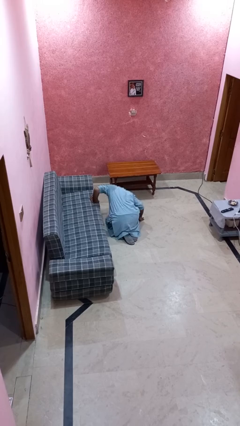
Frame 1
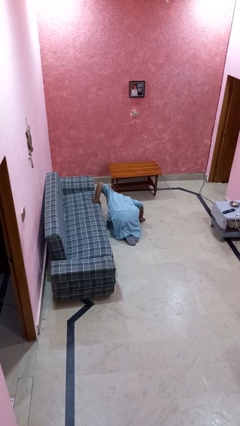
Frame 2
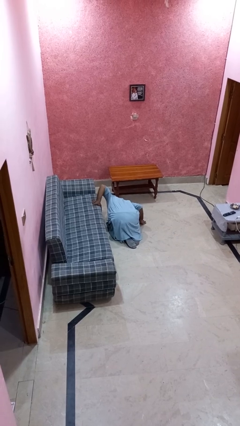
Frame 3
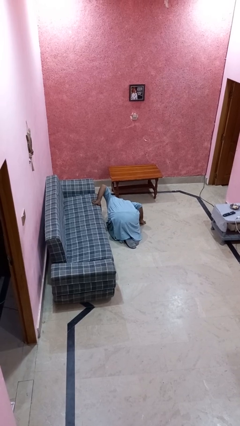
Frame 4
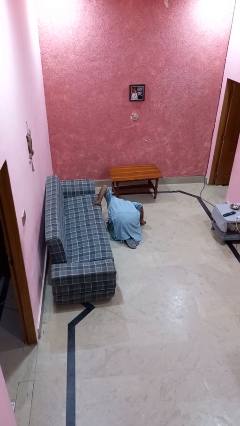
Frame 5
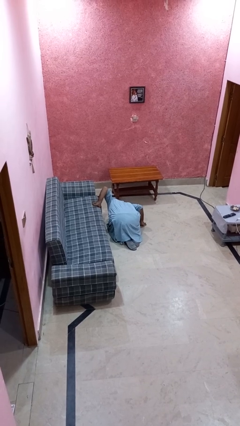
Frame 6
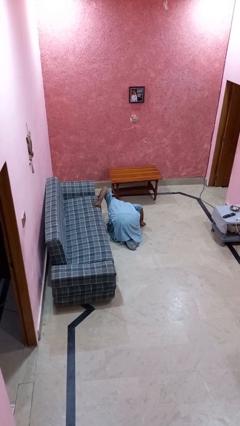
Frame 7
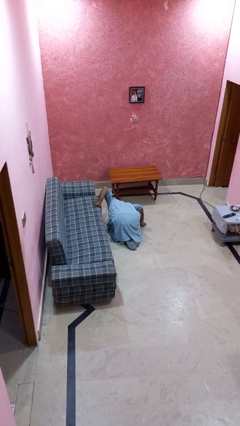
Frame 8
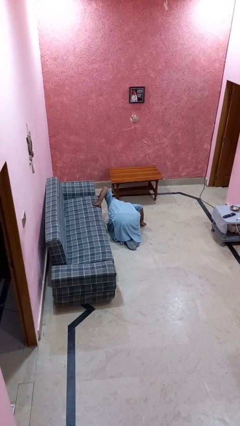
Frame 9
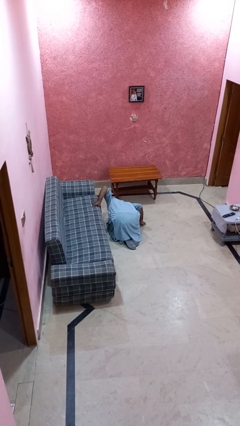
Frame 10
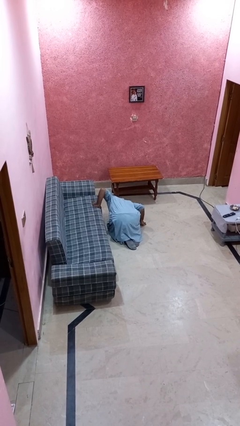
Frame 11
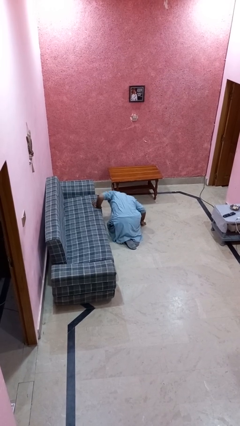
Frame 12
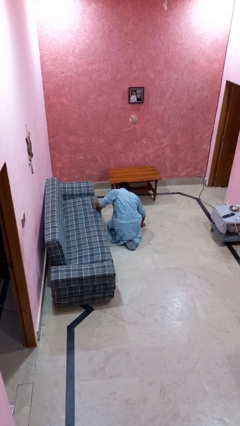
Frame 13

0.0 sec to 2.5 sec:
person searches under couch

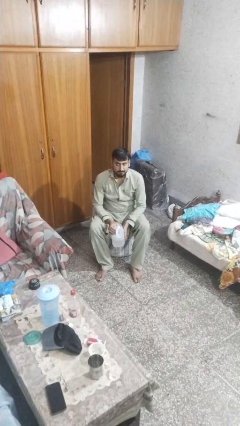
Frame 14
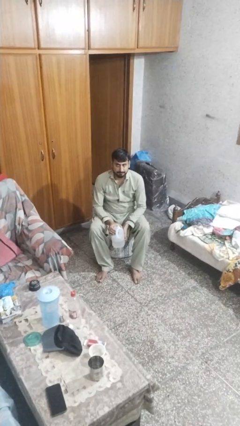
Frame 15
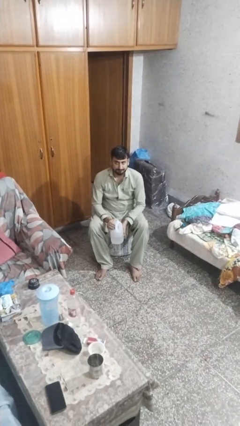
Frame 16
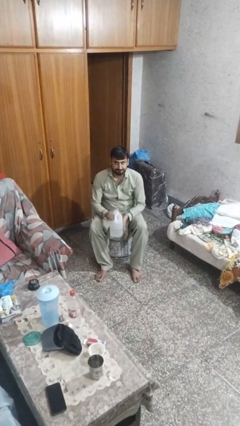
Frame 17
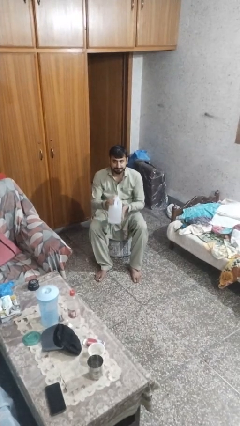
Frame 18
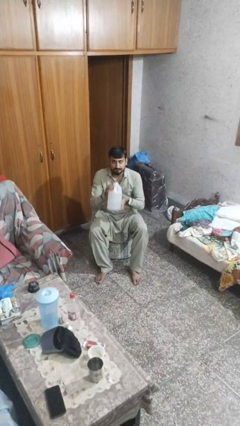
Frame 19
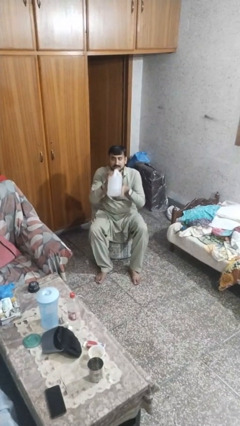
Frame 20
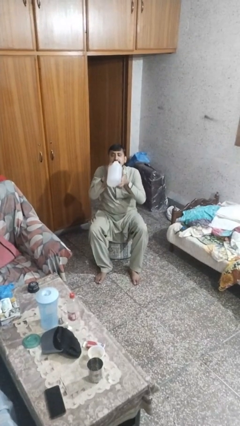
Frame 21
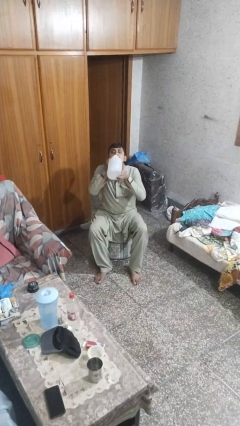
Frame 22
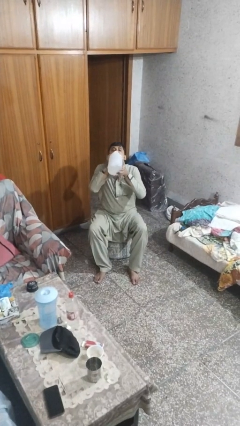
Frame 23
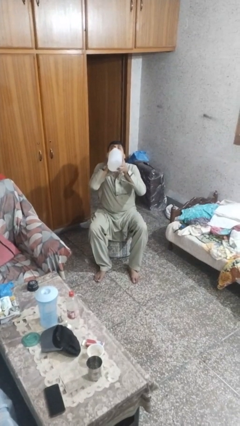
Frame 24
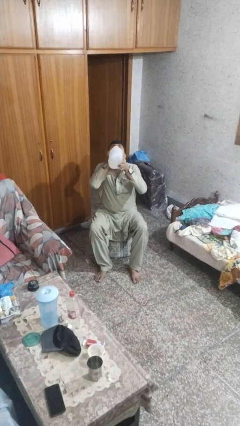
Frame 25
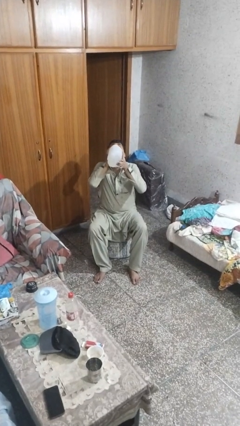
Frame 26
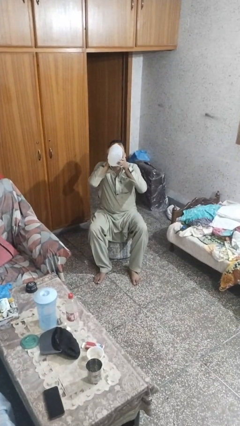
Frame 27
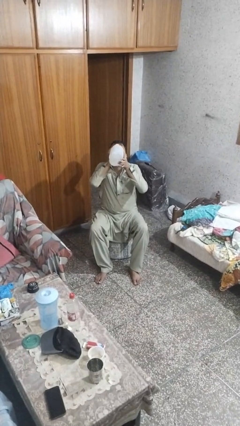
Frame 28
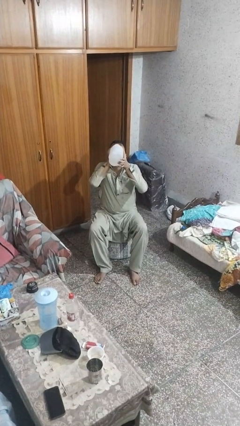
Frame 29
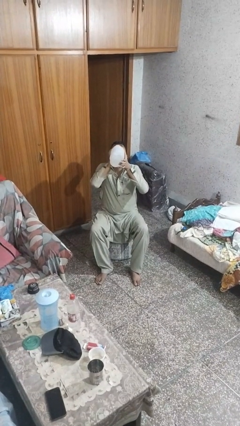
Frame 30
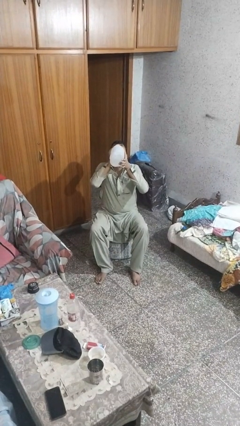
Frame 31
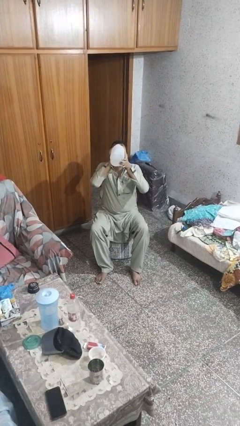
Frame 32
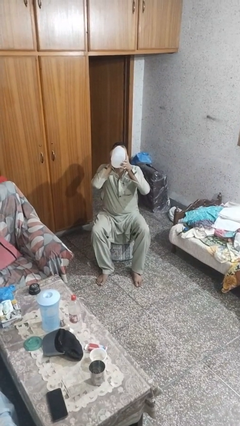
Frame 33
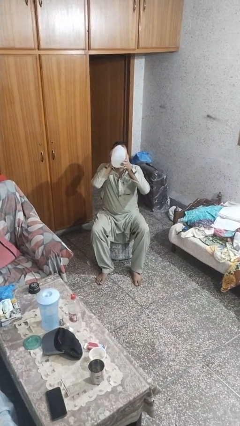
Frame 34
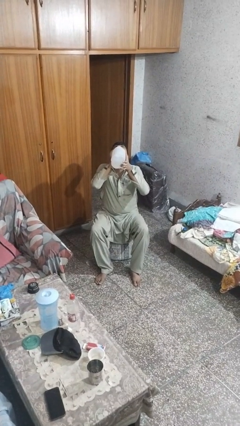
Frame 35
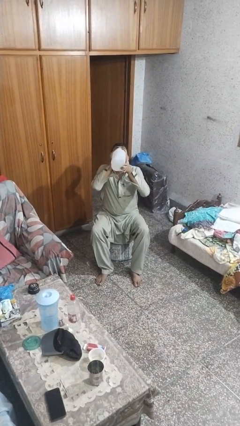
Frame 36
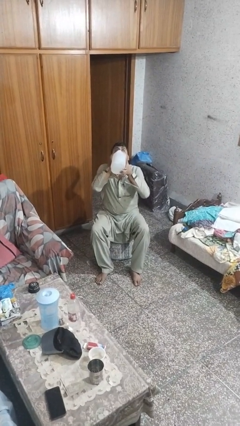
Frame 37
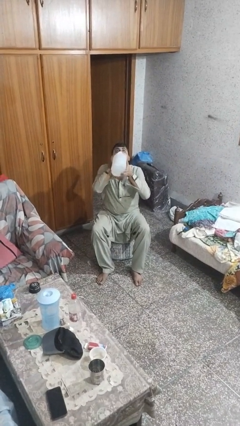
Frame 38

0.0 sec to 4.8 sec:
person drinks from bottle

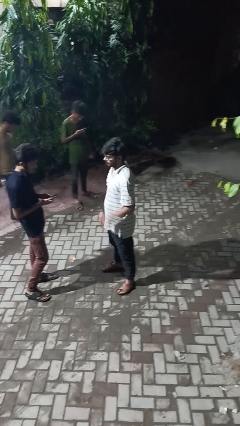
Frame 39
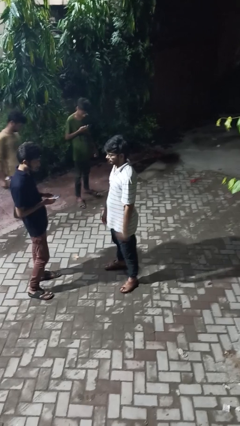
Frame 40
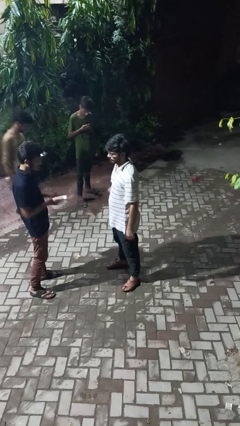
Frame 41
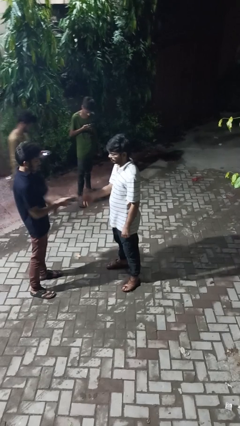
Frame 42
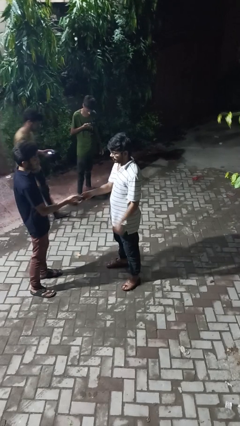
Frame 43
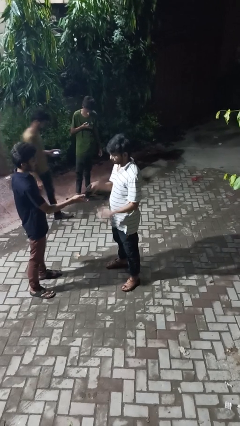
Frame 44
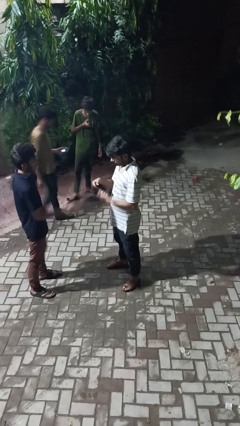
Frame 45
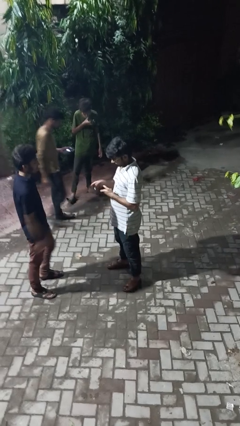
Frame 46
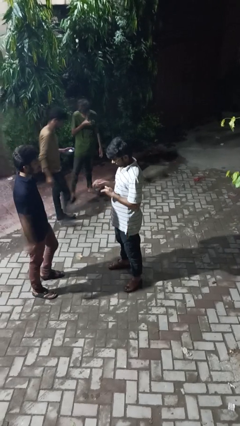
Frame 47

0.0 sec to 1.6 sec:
person transfers object to person

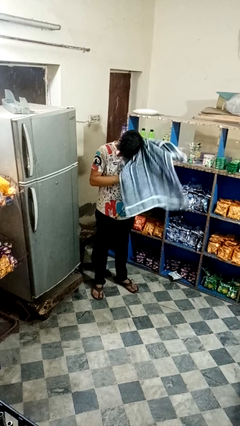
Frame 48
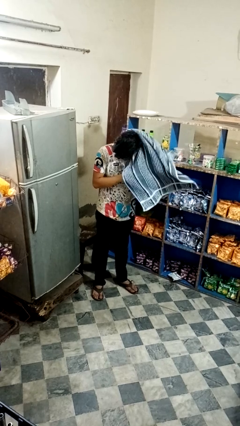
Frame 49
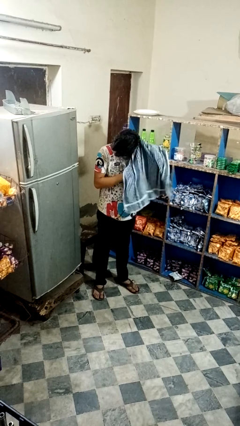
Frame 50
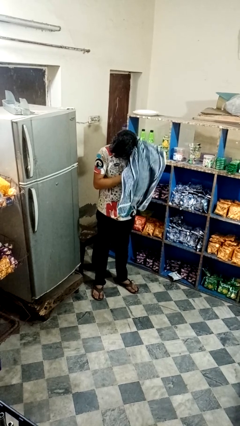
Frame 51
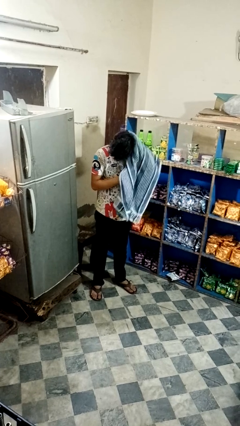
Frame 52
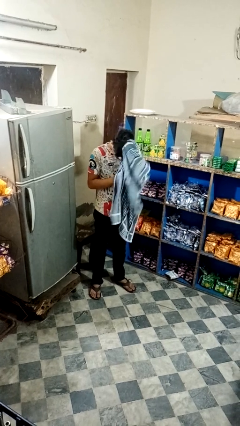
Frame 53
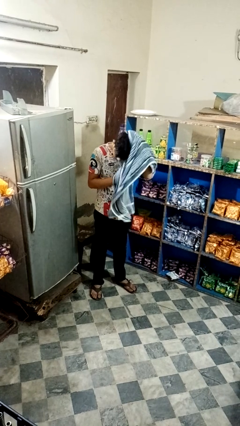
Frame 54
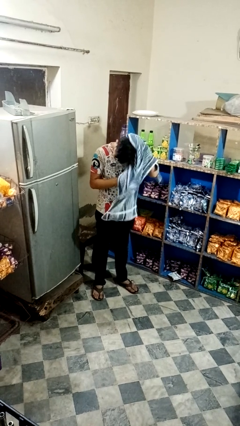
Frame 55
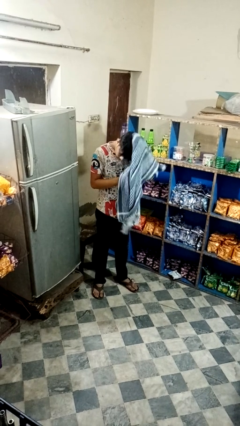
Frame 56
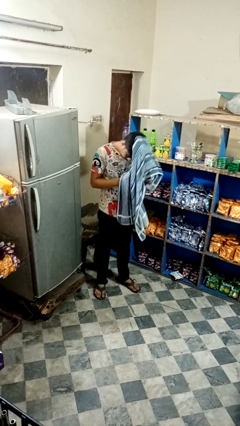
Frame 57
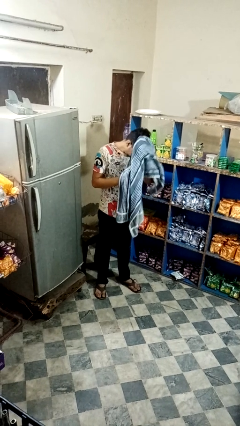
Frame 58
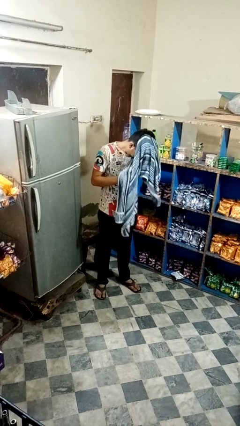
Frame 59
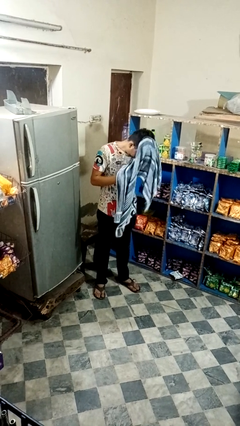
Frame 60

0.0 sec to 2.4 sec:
person dries hair with towel

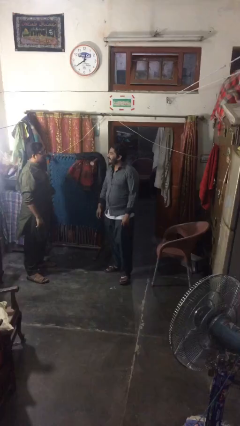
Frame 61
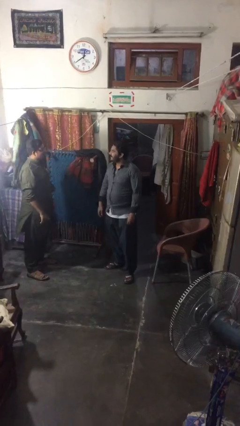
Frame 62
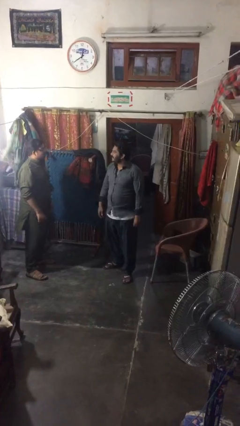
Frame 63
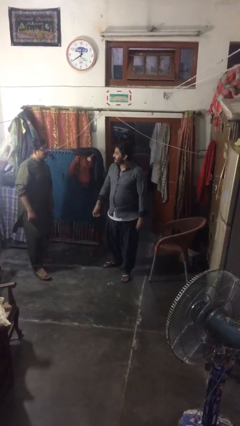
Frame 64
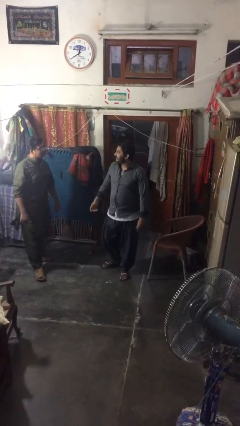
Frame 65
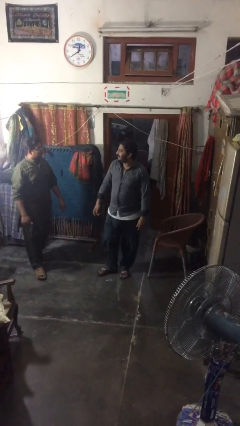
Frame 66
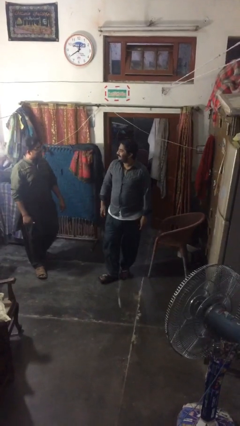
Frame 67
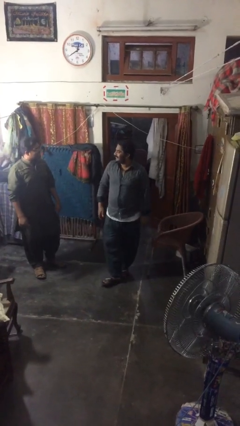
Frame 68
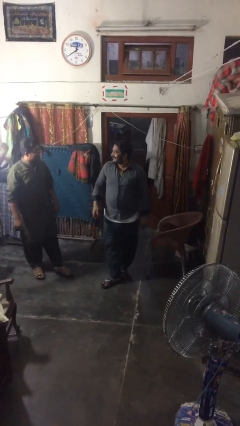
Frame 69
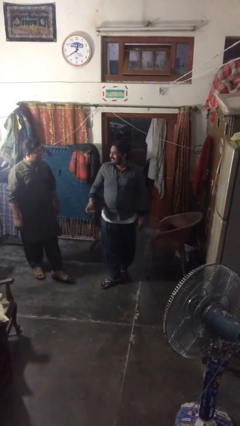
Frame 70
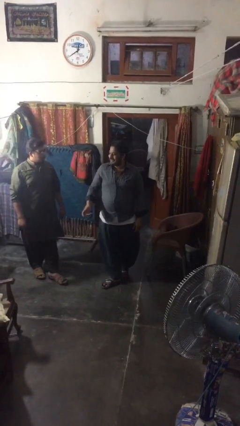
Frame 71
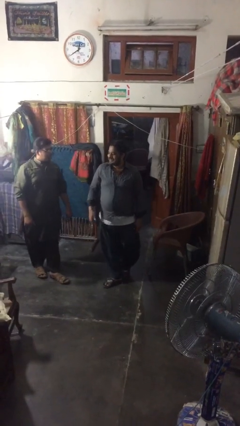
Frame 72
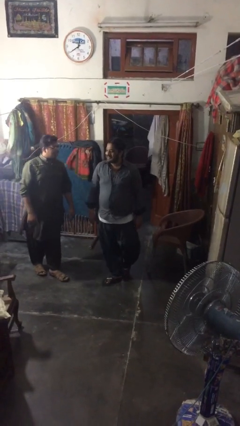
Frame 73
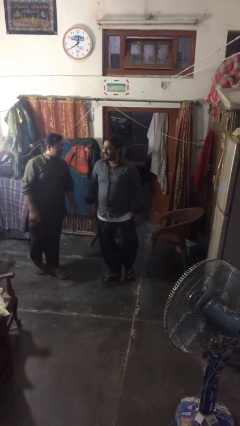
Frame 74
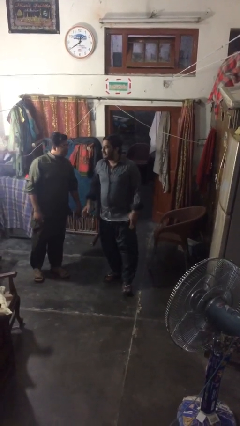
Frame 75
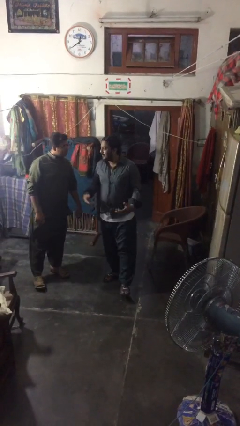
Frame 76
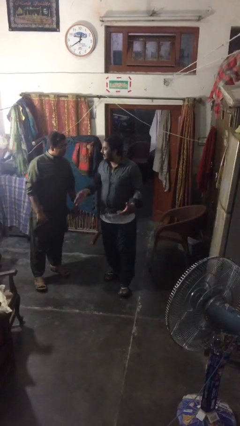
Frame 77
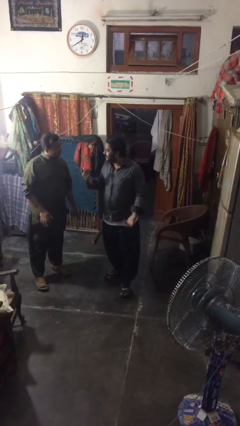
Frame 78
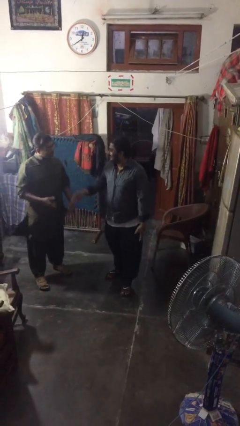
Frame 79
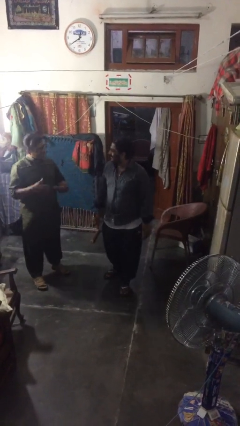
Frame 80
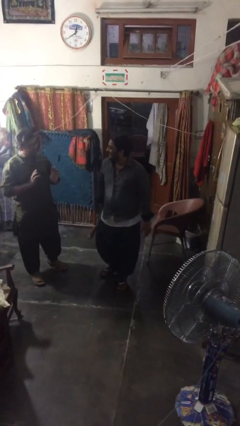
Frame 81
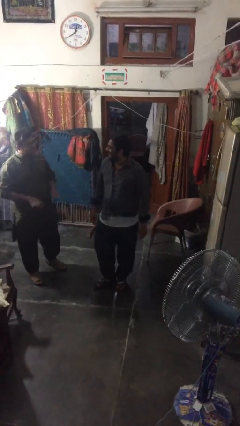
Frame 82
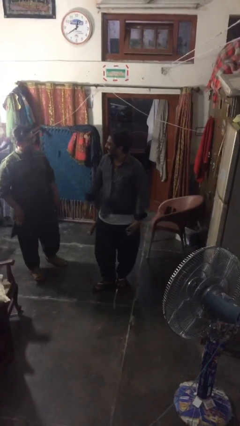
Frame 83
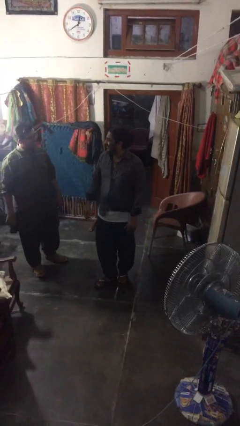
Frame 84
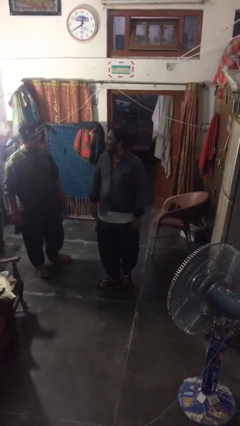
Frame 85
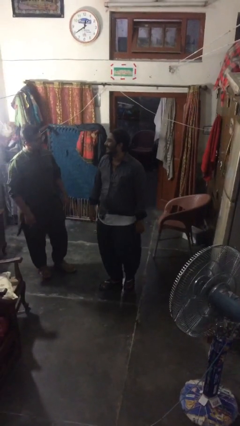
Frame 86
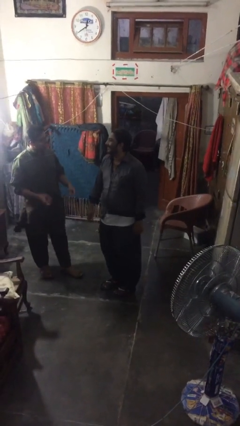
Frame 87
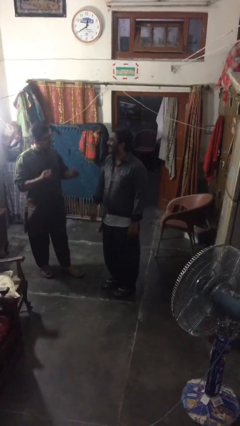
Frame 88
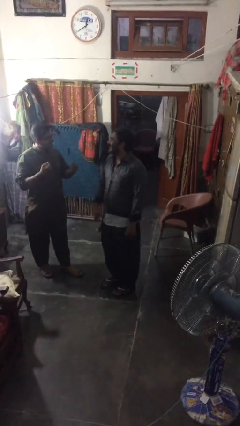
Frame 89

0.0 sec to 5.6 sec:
person talks to person

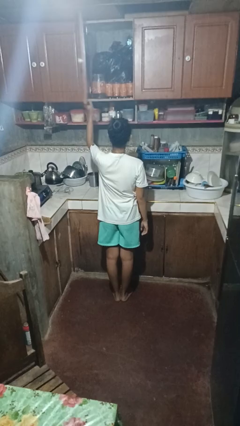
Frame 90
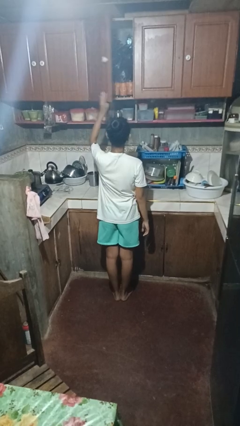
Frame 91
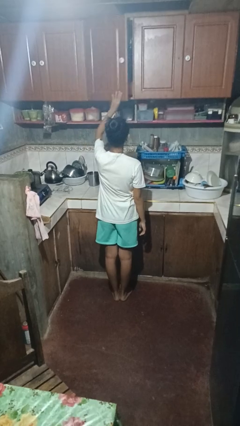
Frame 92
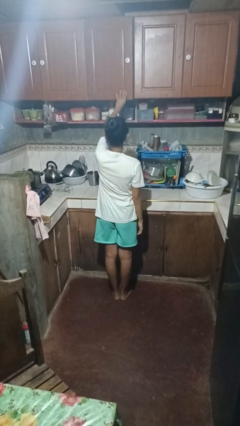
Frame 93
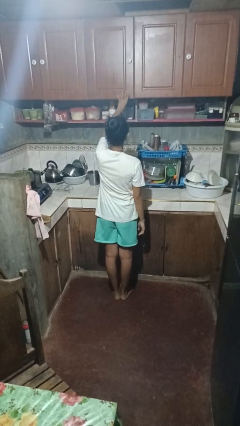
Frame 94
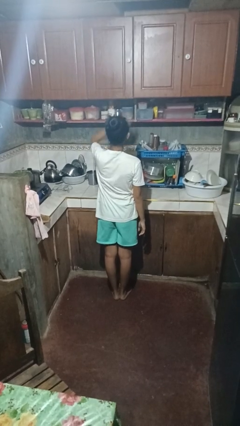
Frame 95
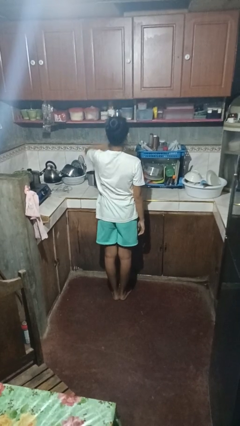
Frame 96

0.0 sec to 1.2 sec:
person closes cabinet
